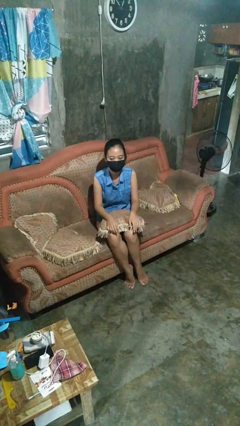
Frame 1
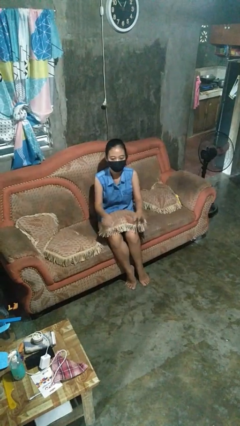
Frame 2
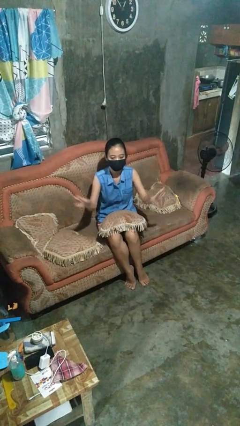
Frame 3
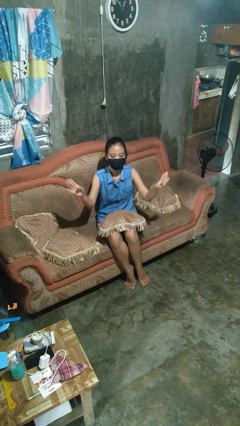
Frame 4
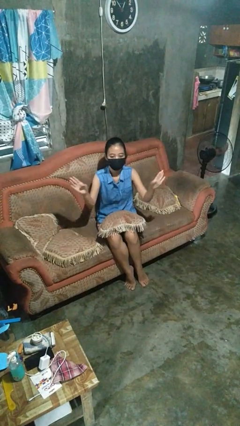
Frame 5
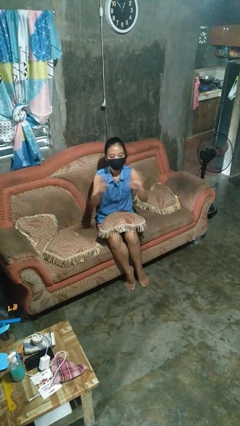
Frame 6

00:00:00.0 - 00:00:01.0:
person gestures zoom out

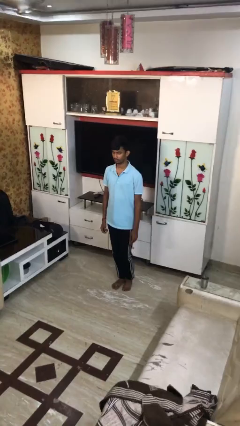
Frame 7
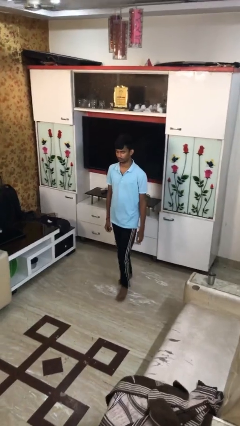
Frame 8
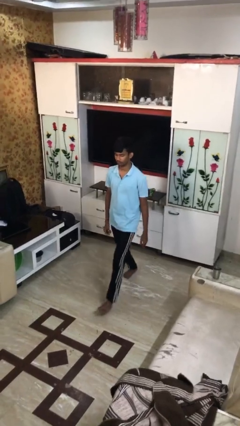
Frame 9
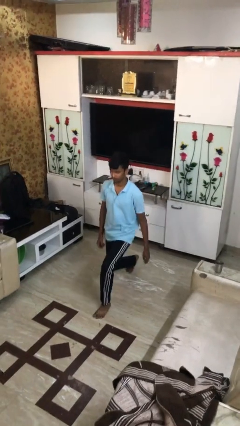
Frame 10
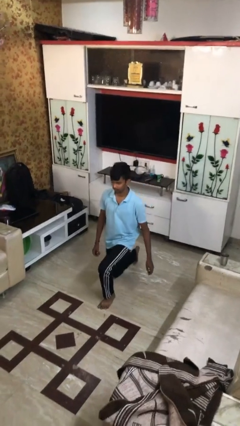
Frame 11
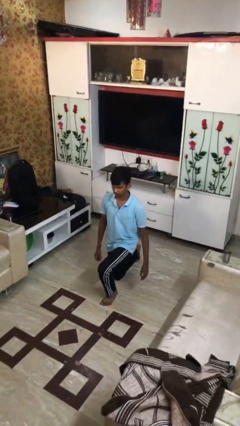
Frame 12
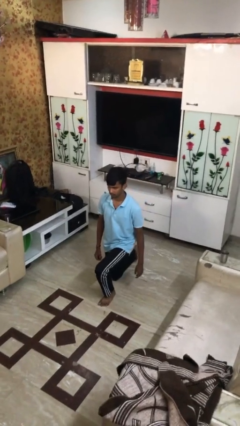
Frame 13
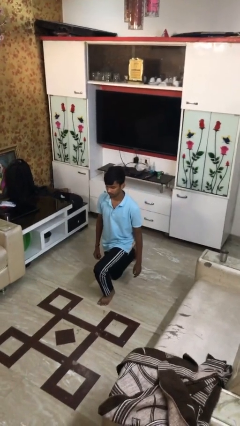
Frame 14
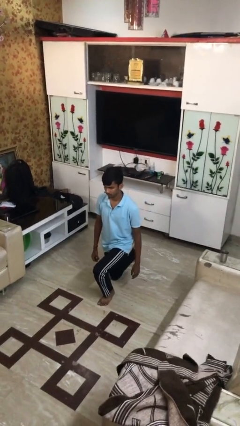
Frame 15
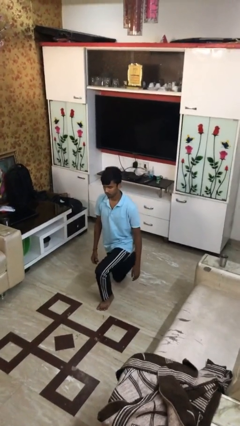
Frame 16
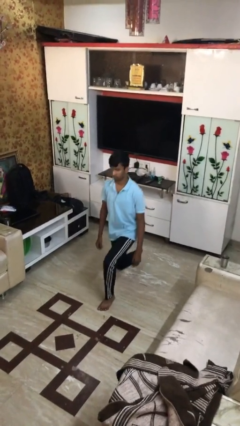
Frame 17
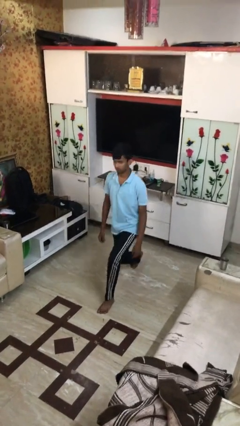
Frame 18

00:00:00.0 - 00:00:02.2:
person exercises with lunges

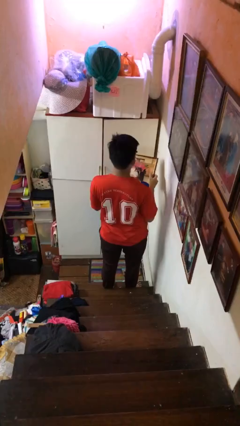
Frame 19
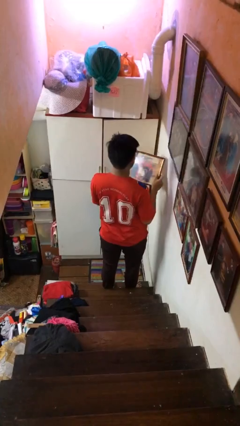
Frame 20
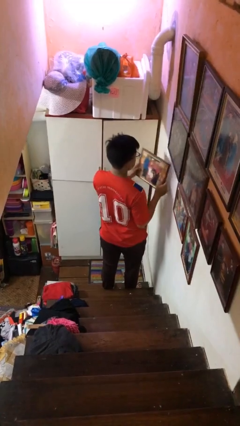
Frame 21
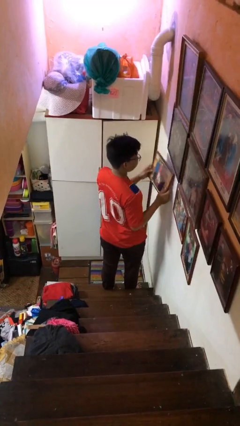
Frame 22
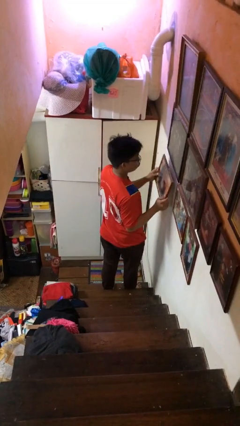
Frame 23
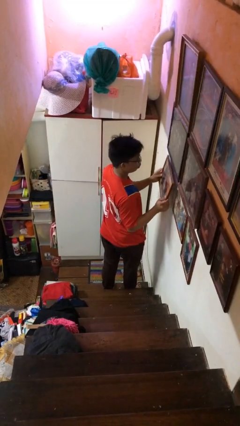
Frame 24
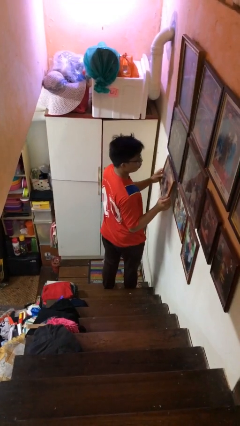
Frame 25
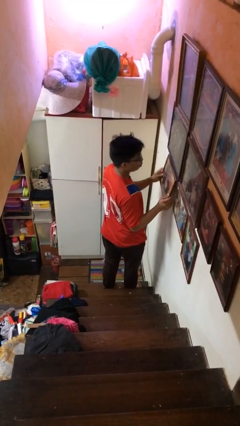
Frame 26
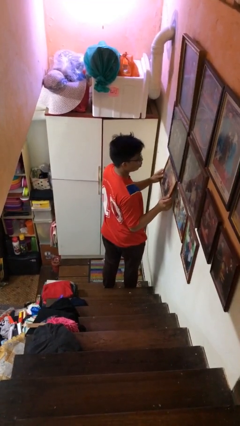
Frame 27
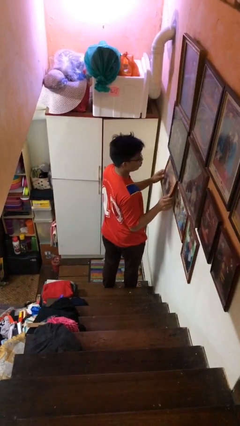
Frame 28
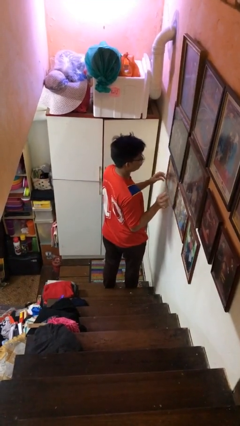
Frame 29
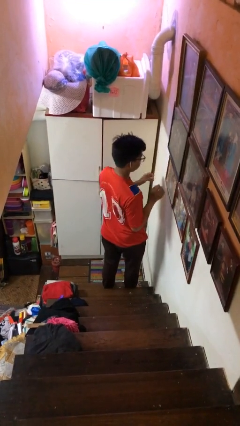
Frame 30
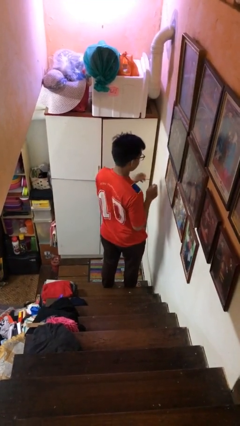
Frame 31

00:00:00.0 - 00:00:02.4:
person puts up picture frame

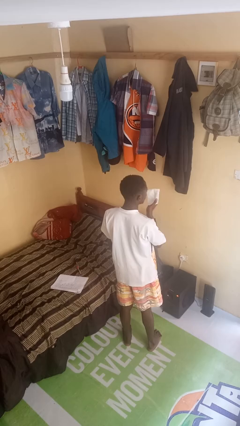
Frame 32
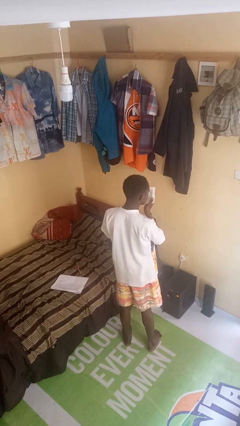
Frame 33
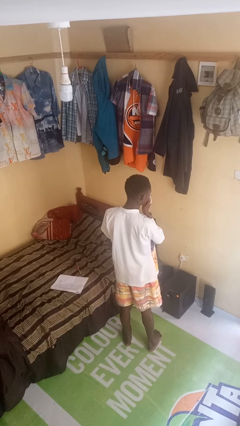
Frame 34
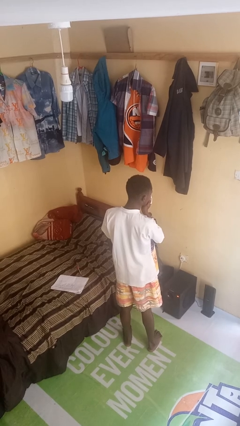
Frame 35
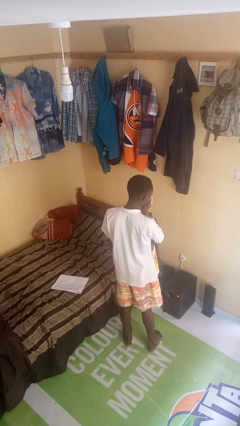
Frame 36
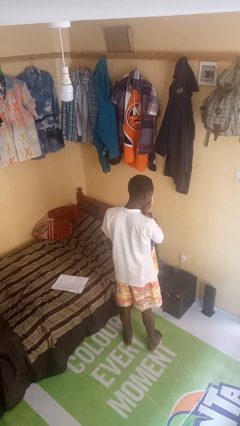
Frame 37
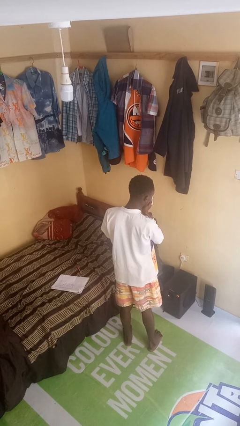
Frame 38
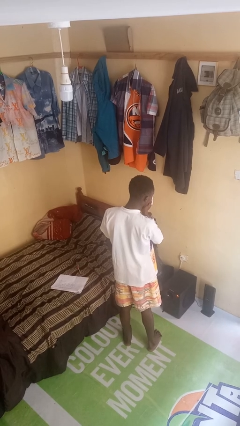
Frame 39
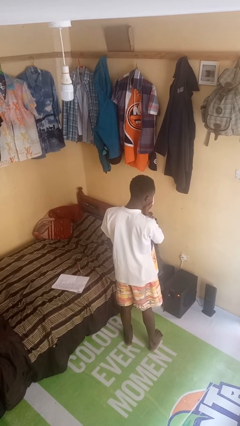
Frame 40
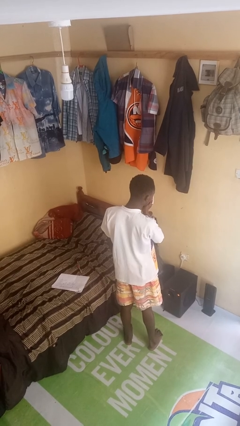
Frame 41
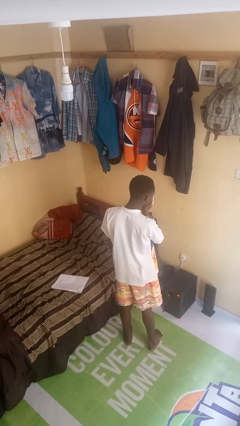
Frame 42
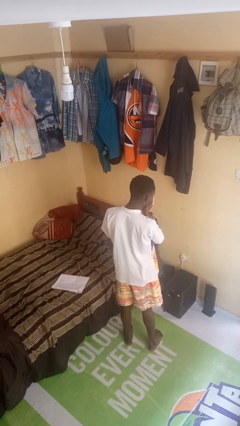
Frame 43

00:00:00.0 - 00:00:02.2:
person blows nose

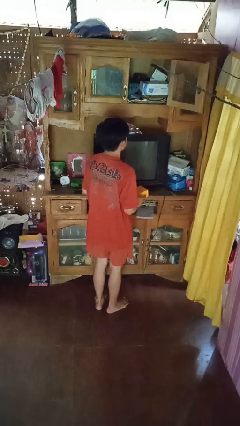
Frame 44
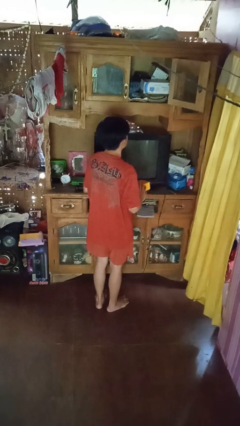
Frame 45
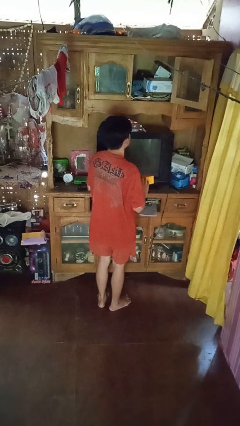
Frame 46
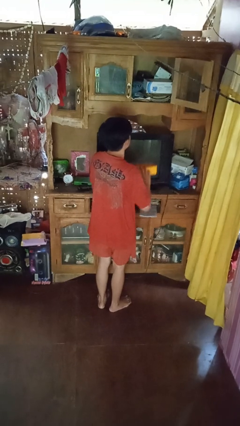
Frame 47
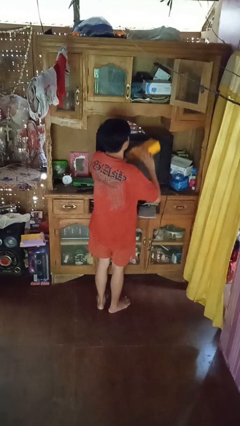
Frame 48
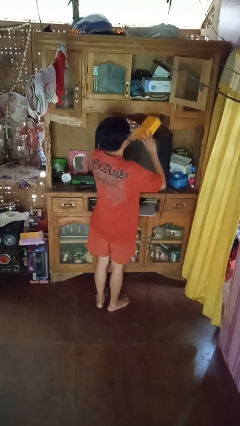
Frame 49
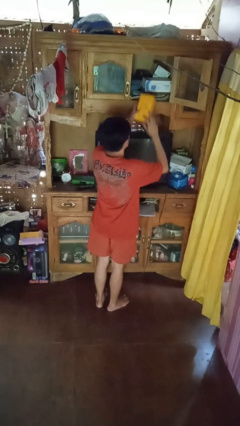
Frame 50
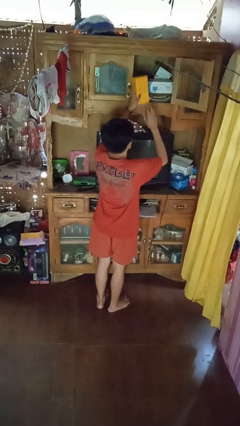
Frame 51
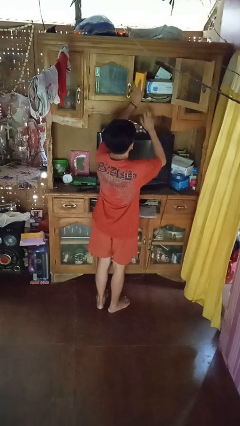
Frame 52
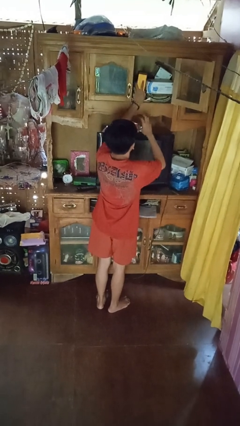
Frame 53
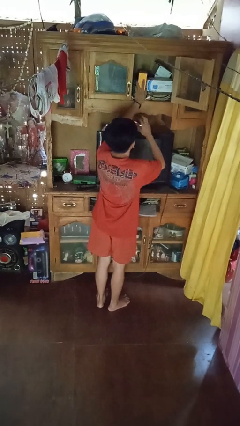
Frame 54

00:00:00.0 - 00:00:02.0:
person puts down object on shelf

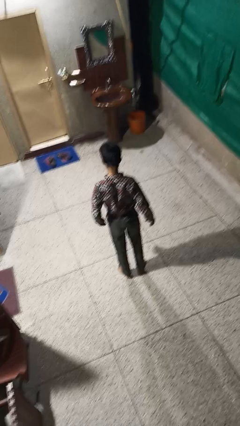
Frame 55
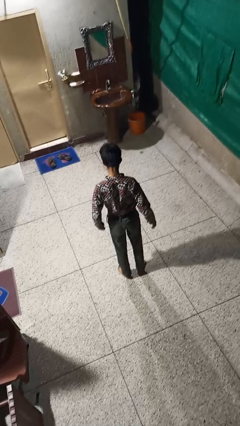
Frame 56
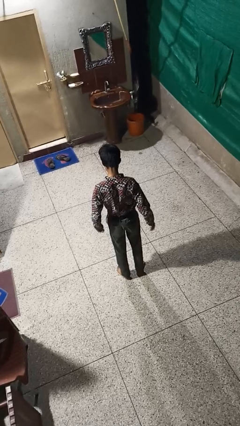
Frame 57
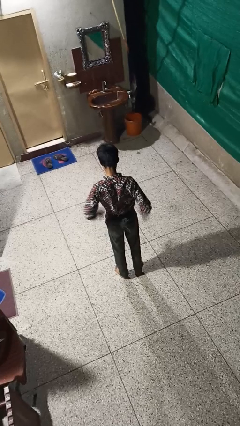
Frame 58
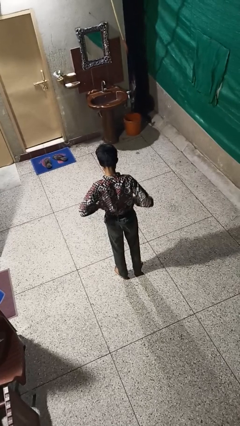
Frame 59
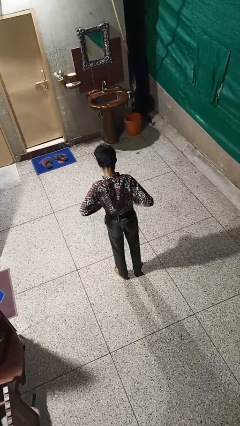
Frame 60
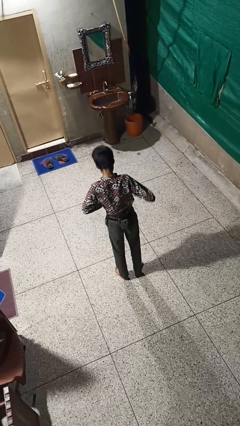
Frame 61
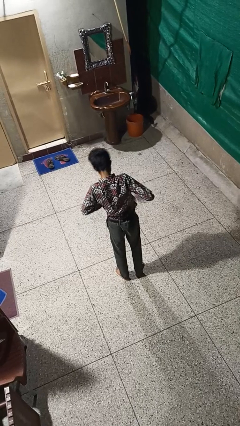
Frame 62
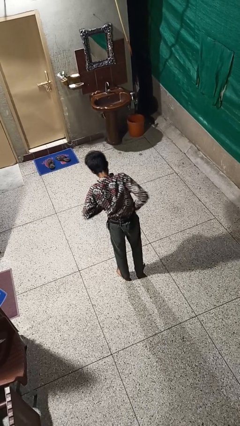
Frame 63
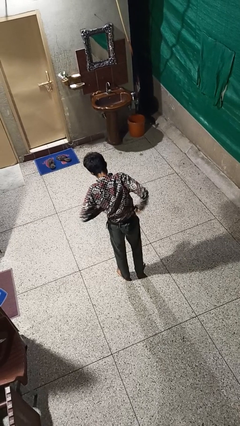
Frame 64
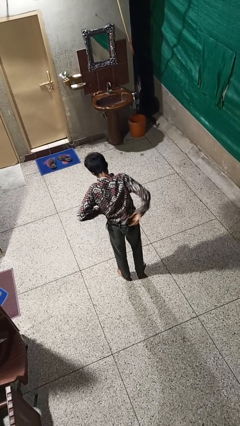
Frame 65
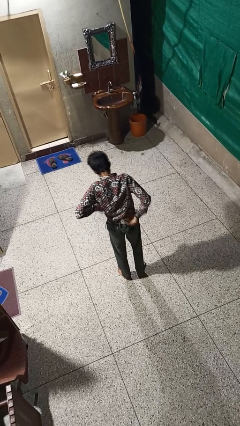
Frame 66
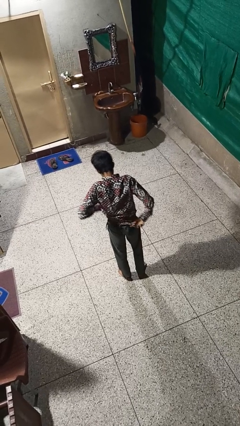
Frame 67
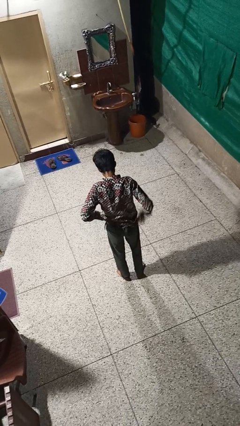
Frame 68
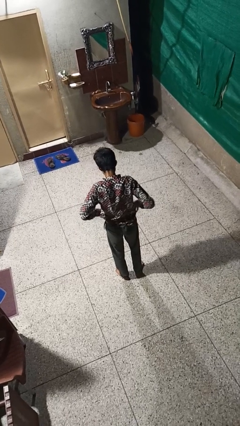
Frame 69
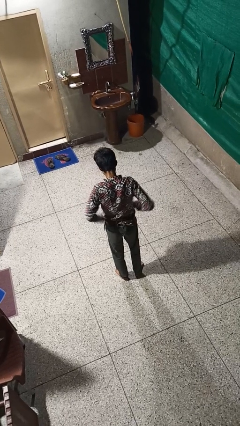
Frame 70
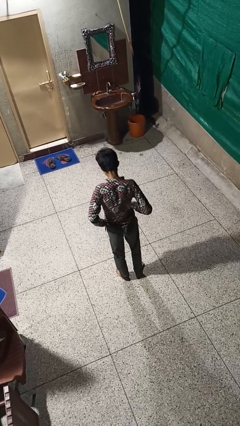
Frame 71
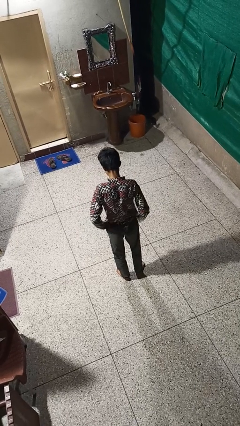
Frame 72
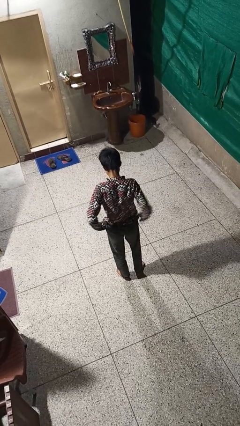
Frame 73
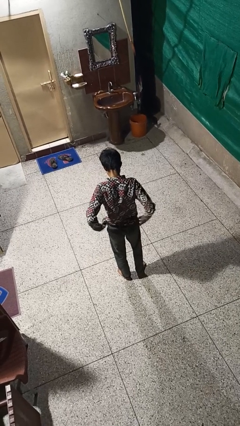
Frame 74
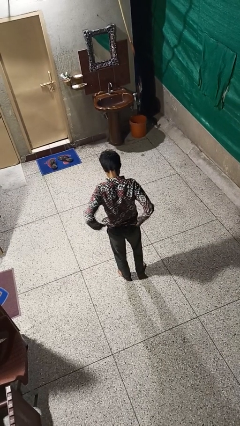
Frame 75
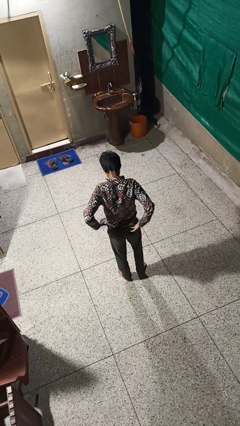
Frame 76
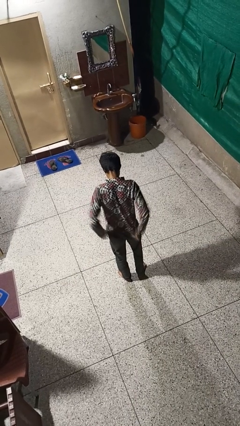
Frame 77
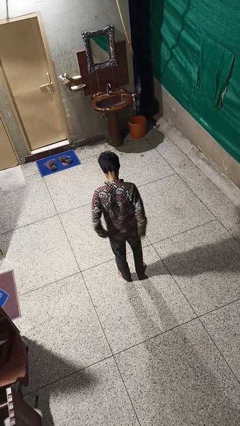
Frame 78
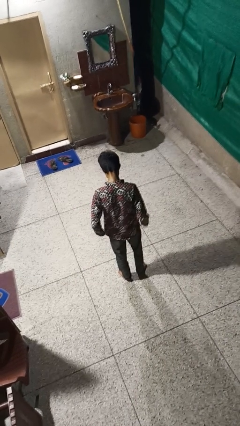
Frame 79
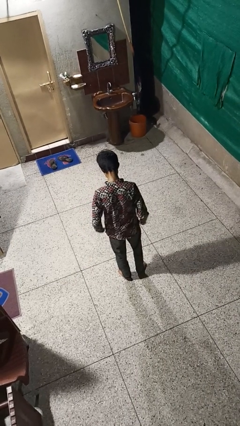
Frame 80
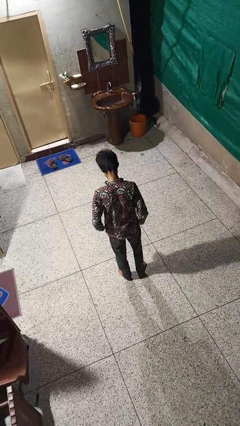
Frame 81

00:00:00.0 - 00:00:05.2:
person untucks shirt
